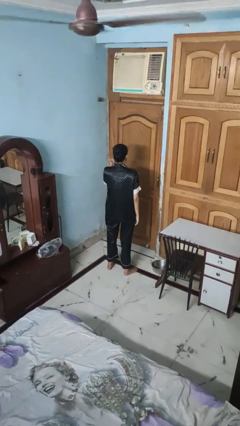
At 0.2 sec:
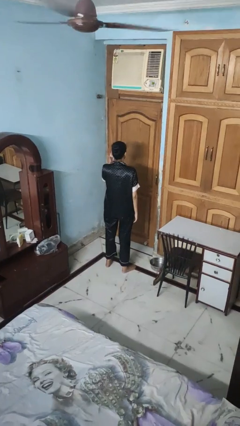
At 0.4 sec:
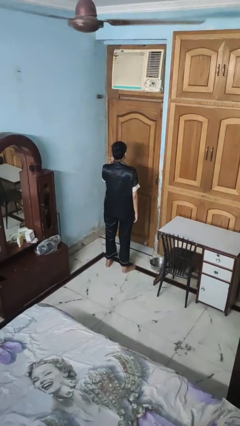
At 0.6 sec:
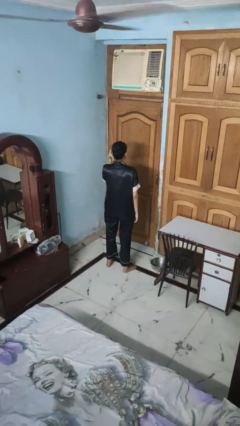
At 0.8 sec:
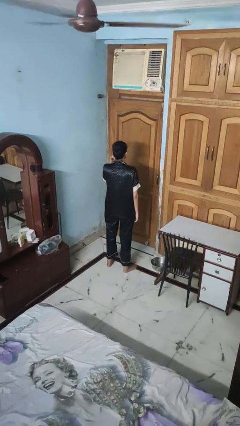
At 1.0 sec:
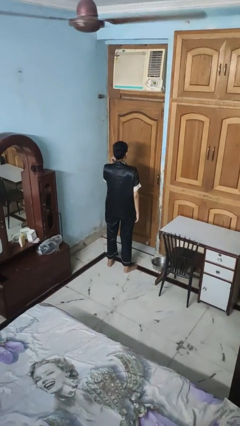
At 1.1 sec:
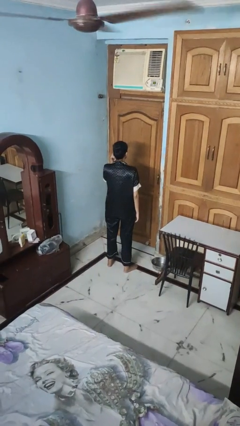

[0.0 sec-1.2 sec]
person touches earlobe

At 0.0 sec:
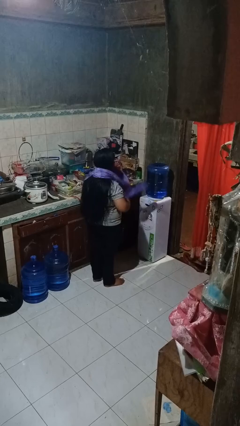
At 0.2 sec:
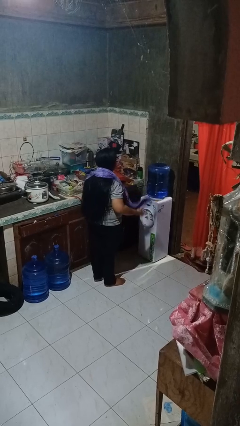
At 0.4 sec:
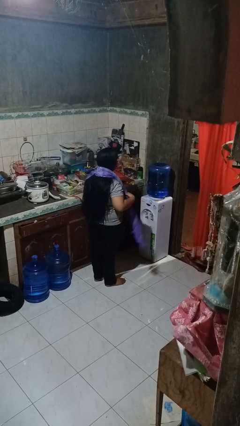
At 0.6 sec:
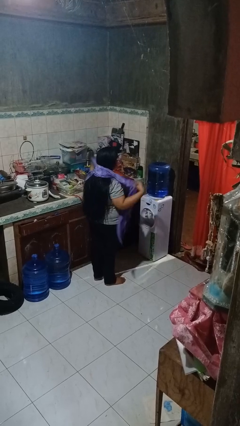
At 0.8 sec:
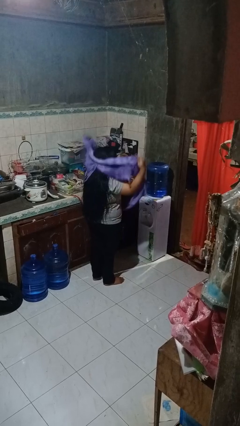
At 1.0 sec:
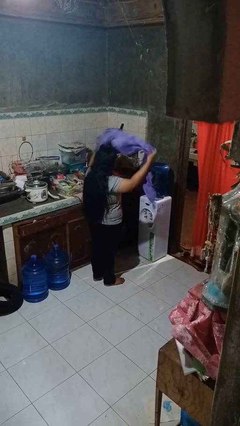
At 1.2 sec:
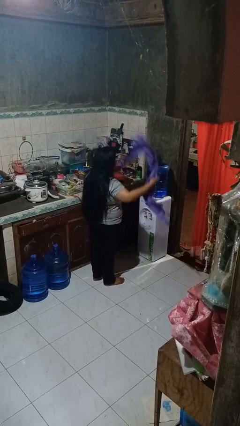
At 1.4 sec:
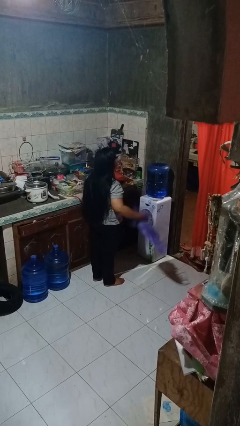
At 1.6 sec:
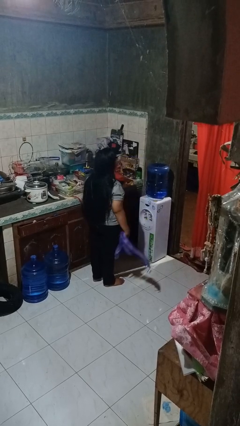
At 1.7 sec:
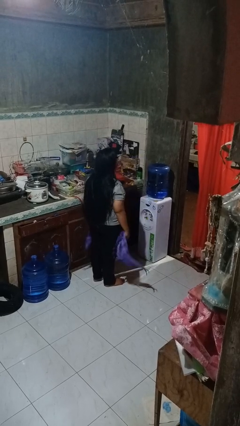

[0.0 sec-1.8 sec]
person takes off scarf

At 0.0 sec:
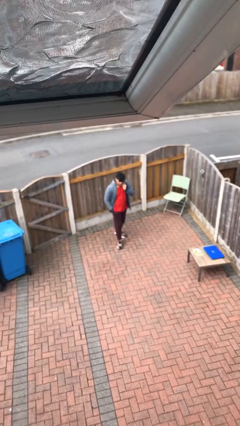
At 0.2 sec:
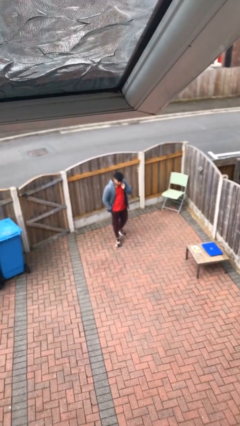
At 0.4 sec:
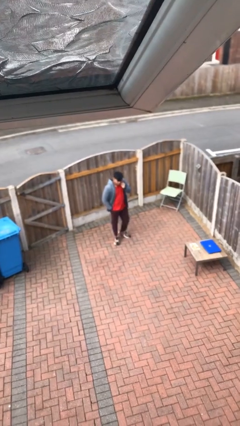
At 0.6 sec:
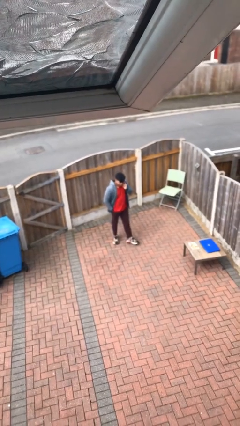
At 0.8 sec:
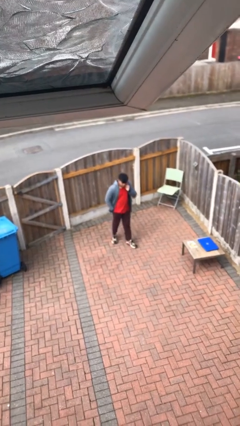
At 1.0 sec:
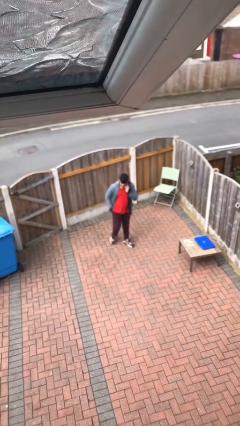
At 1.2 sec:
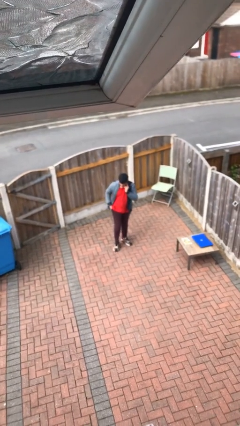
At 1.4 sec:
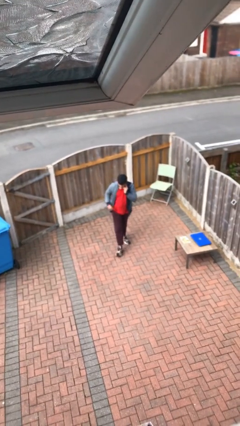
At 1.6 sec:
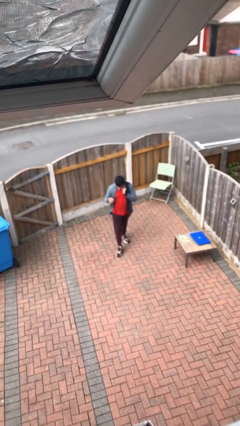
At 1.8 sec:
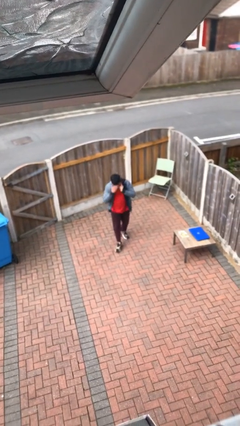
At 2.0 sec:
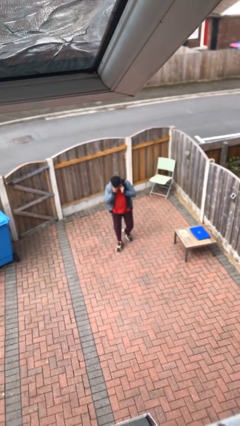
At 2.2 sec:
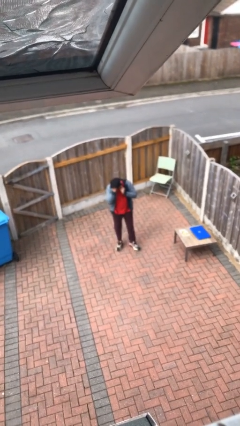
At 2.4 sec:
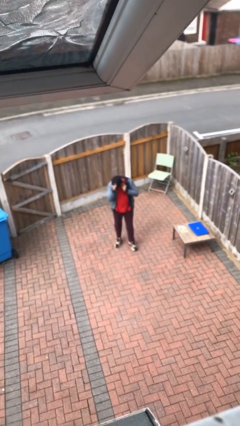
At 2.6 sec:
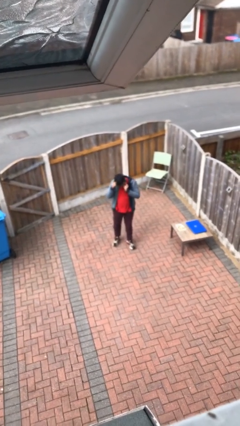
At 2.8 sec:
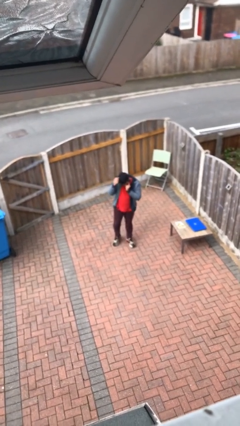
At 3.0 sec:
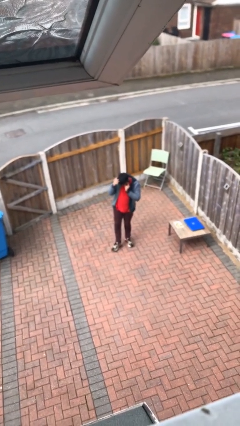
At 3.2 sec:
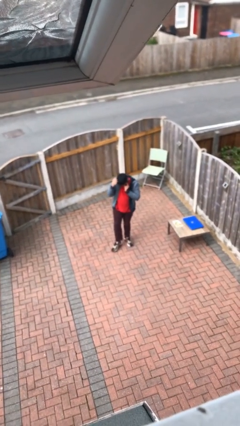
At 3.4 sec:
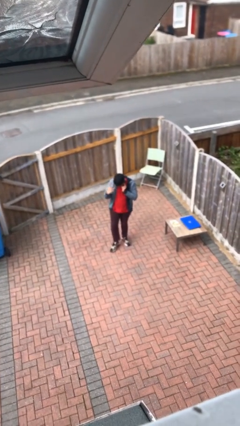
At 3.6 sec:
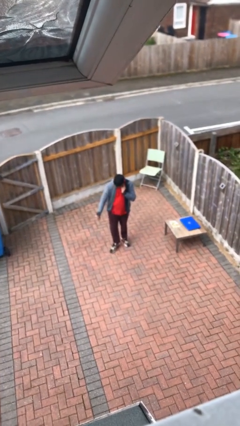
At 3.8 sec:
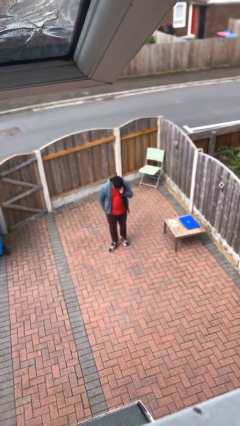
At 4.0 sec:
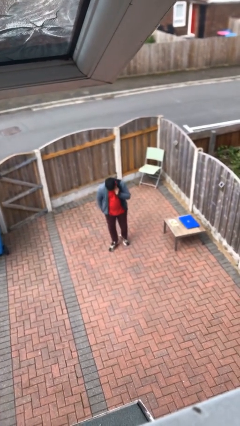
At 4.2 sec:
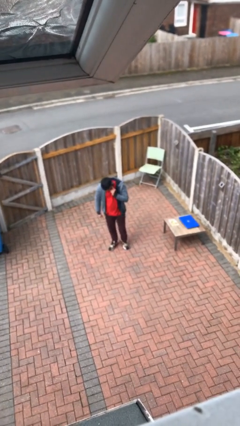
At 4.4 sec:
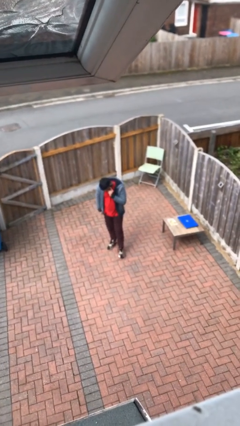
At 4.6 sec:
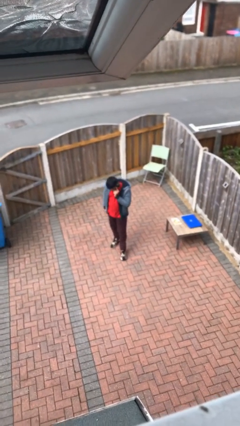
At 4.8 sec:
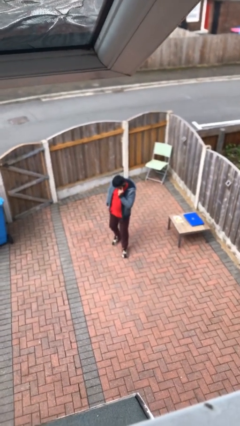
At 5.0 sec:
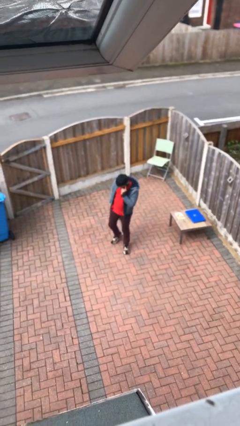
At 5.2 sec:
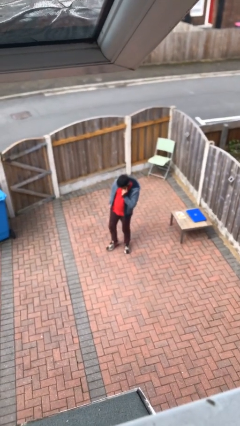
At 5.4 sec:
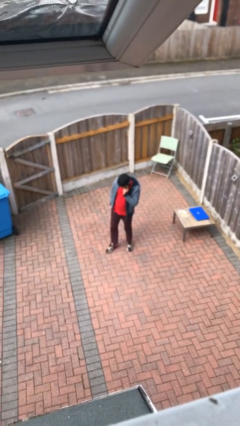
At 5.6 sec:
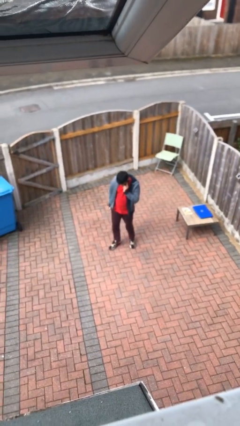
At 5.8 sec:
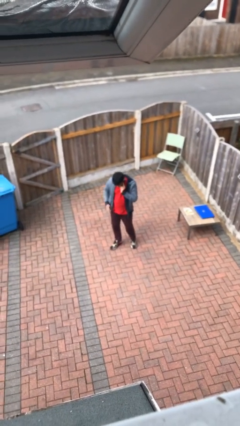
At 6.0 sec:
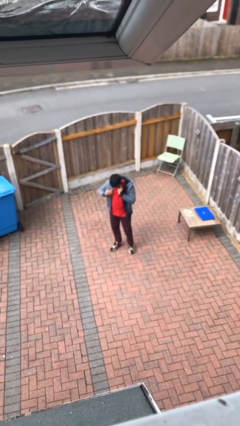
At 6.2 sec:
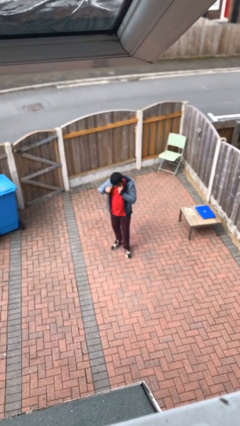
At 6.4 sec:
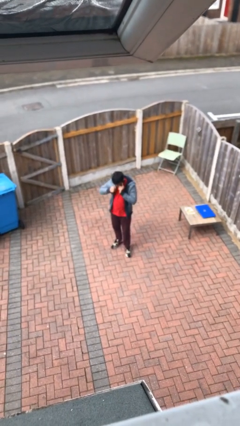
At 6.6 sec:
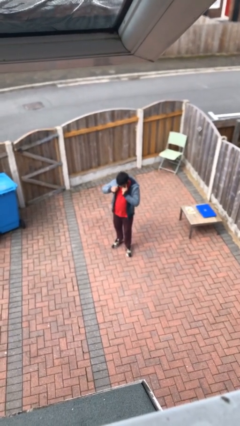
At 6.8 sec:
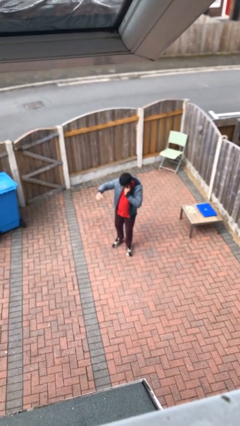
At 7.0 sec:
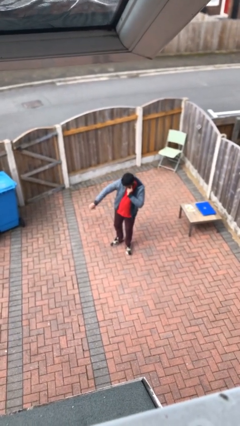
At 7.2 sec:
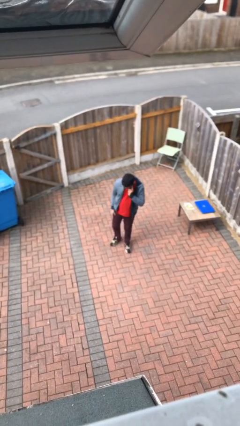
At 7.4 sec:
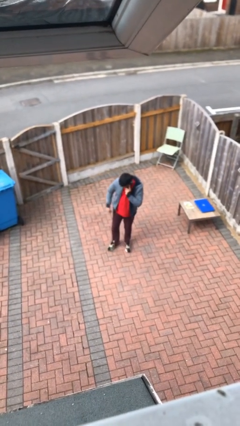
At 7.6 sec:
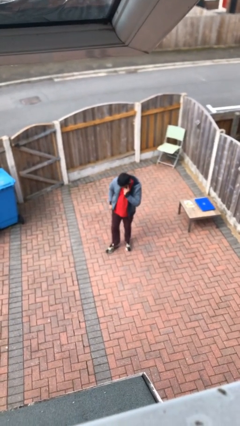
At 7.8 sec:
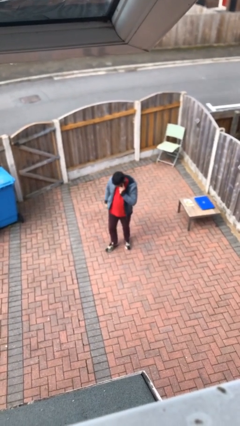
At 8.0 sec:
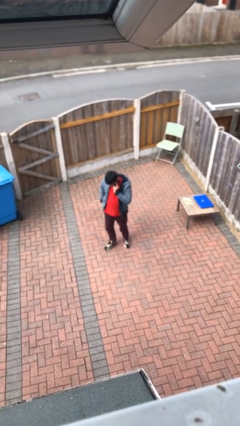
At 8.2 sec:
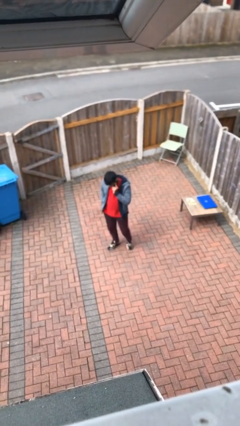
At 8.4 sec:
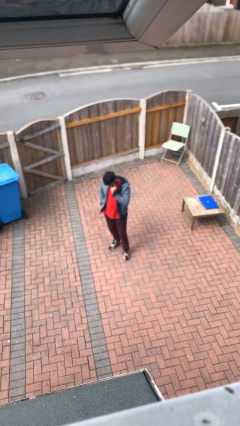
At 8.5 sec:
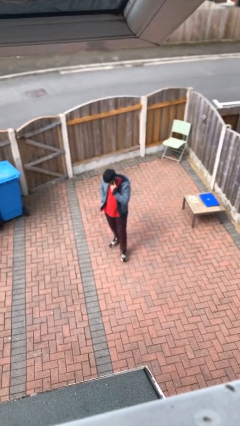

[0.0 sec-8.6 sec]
person talks on phone

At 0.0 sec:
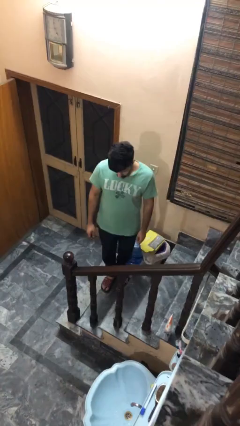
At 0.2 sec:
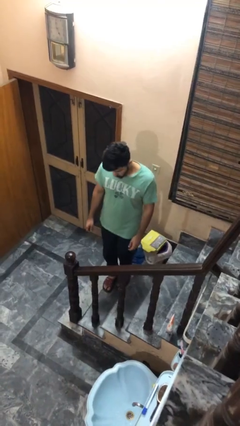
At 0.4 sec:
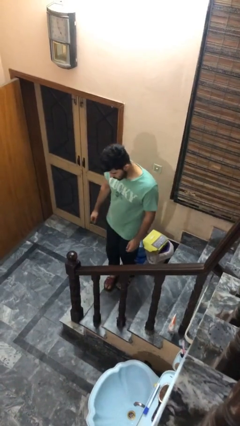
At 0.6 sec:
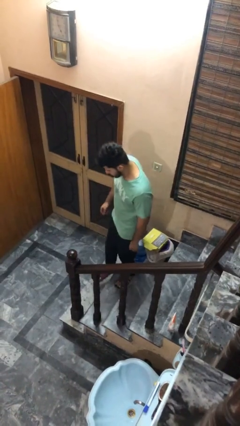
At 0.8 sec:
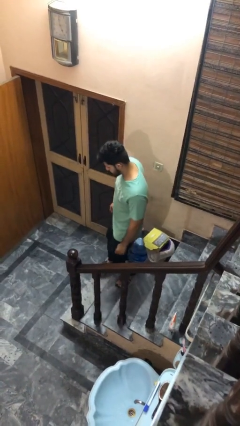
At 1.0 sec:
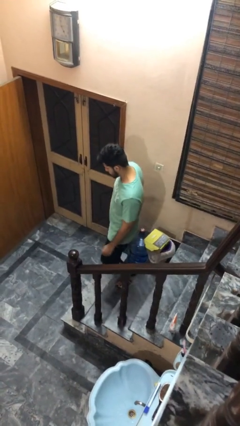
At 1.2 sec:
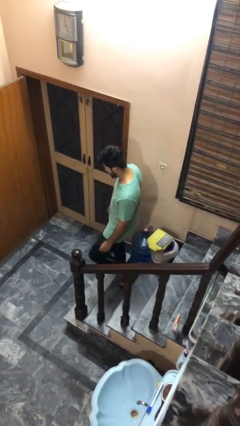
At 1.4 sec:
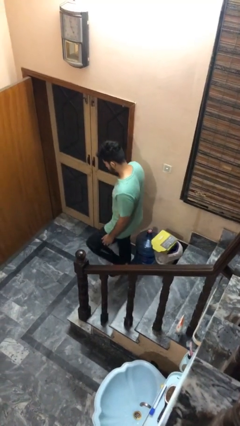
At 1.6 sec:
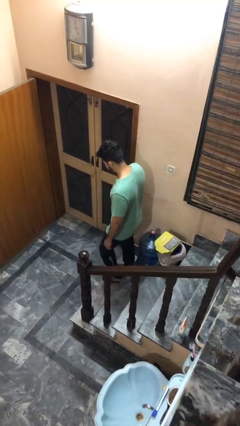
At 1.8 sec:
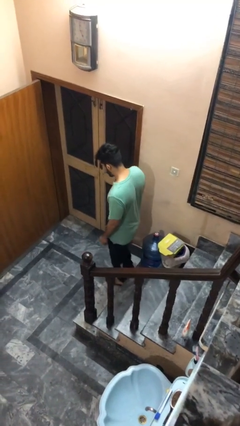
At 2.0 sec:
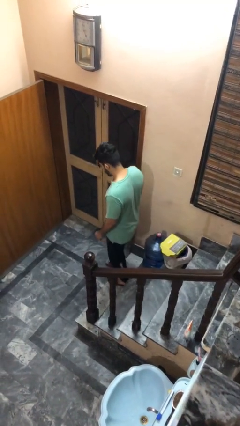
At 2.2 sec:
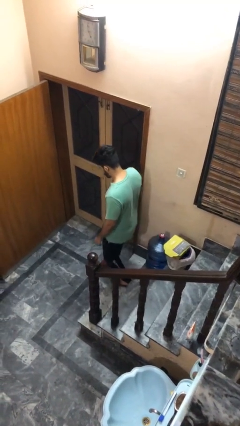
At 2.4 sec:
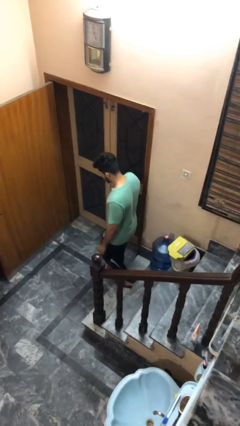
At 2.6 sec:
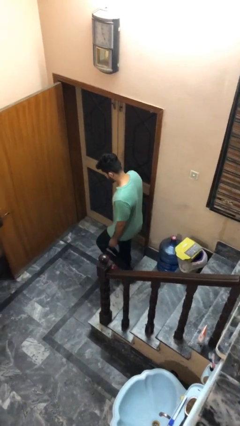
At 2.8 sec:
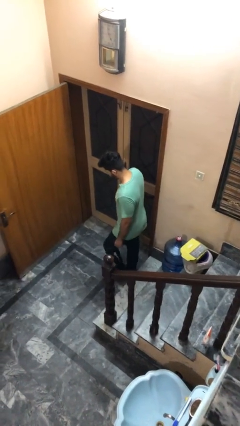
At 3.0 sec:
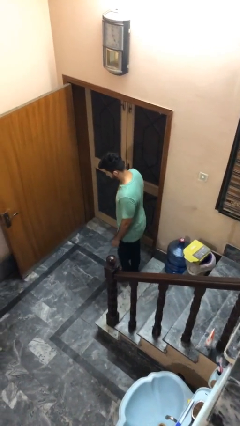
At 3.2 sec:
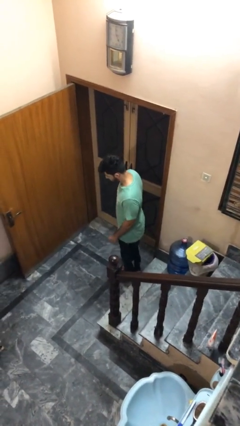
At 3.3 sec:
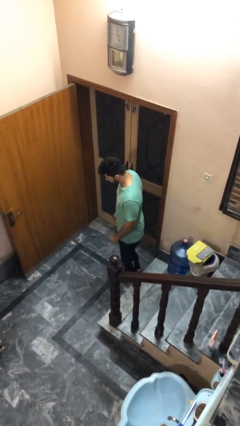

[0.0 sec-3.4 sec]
person climbs down stairs

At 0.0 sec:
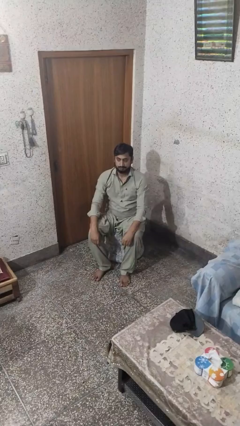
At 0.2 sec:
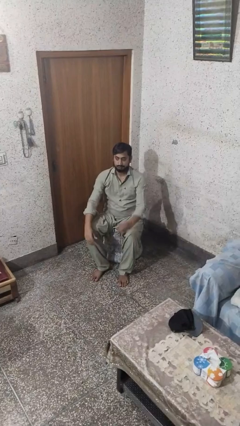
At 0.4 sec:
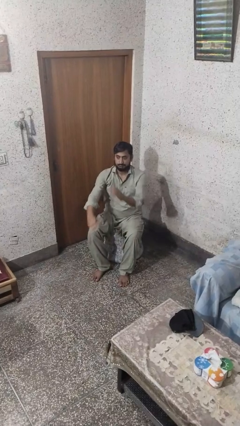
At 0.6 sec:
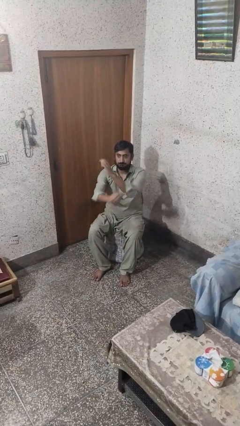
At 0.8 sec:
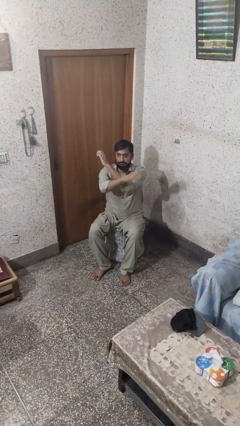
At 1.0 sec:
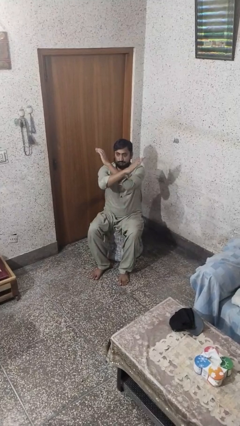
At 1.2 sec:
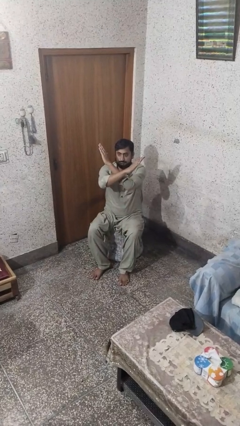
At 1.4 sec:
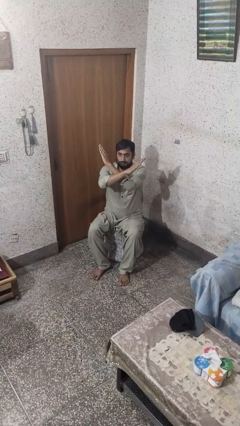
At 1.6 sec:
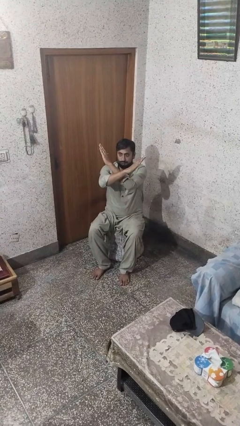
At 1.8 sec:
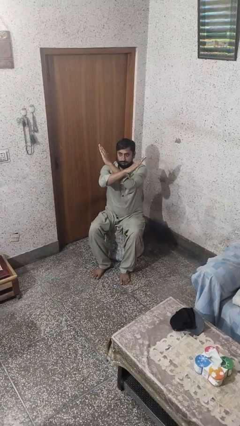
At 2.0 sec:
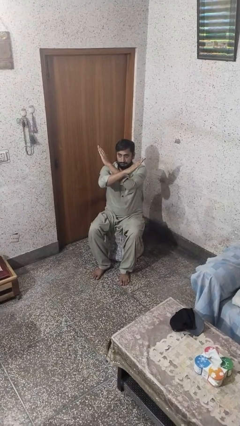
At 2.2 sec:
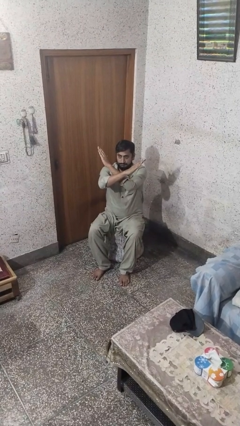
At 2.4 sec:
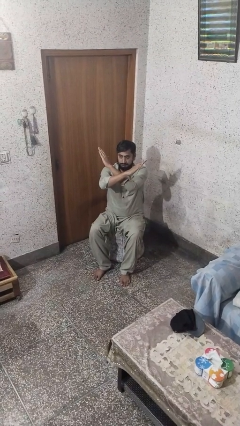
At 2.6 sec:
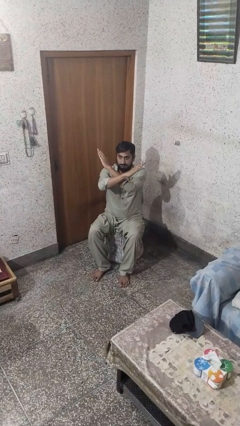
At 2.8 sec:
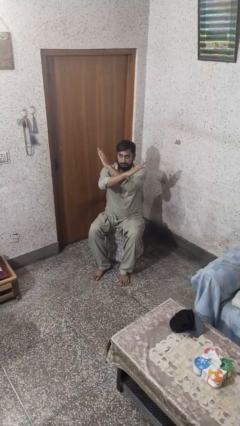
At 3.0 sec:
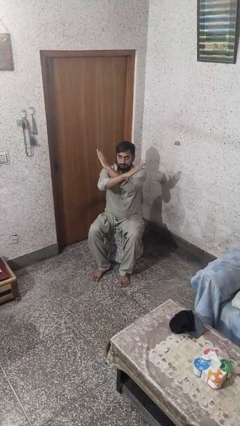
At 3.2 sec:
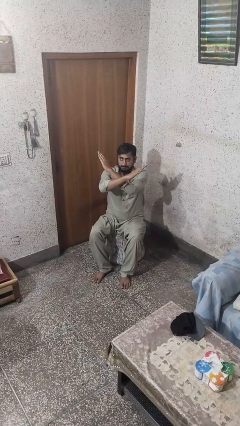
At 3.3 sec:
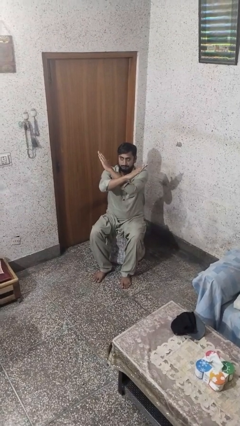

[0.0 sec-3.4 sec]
person gestures arms x
